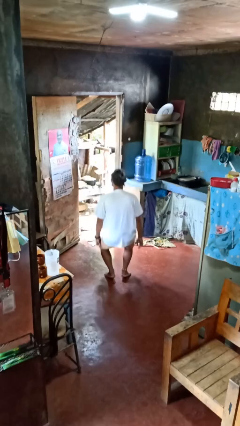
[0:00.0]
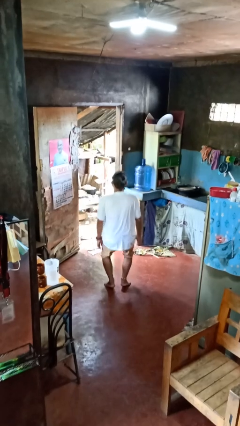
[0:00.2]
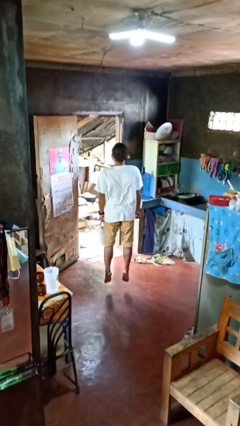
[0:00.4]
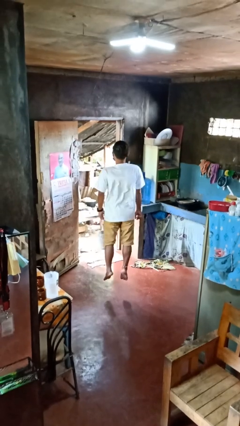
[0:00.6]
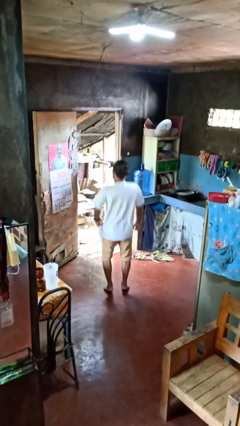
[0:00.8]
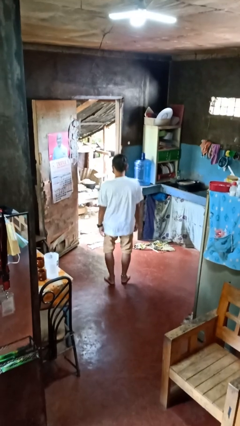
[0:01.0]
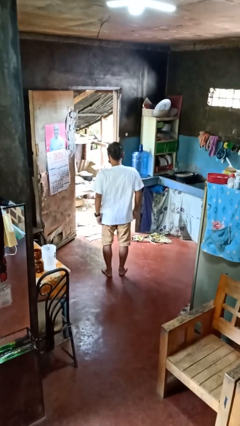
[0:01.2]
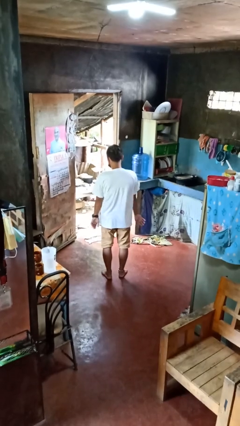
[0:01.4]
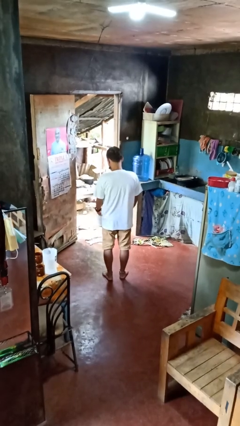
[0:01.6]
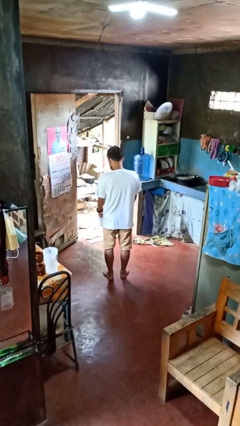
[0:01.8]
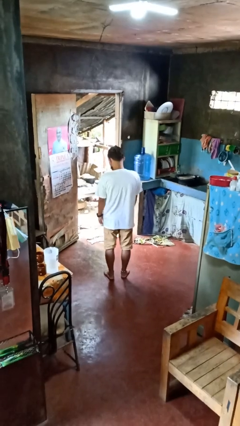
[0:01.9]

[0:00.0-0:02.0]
person jumps

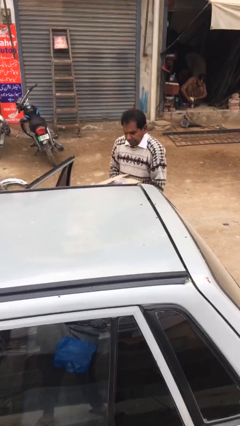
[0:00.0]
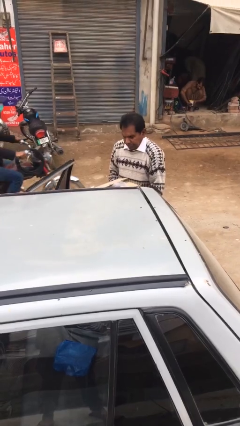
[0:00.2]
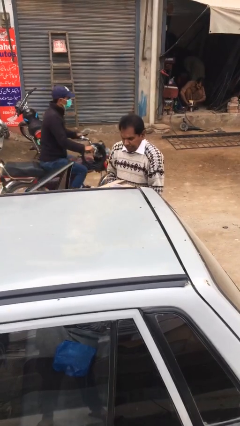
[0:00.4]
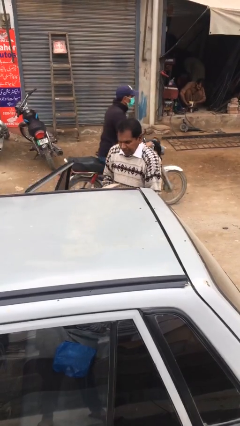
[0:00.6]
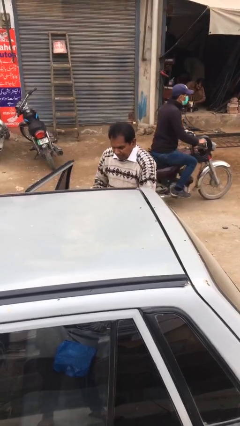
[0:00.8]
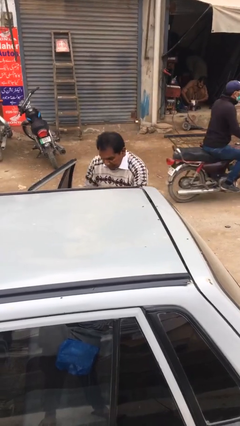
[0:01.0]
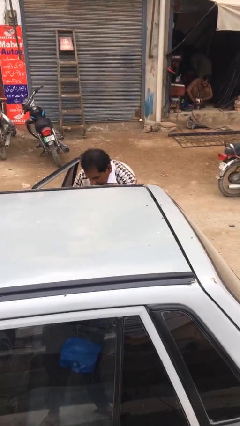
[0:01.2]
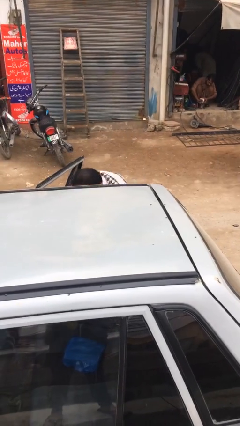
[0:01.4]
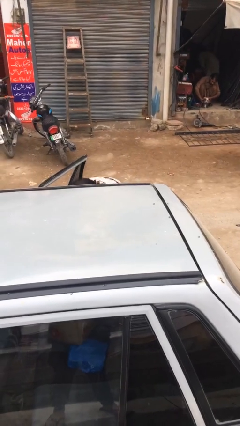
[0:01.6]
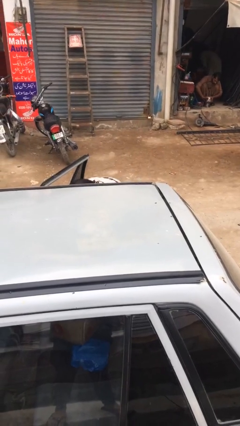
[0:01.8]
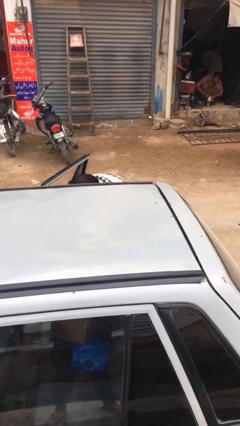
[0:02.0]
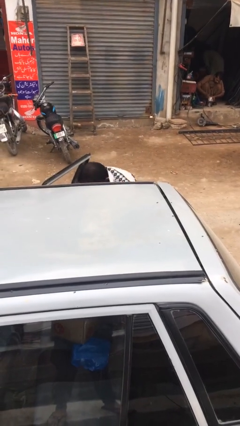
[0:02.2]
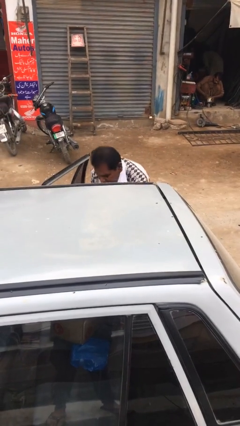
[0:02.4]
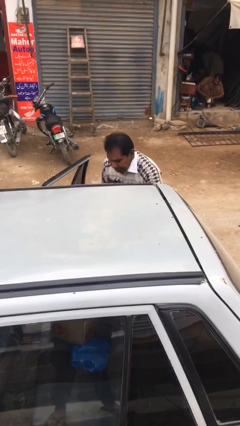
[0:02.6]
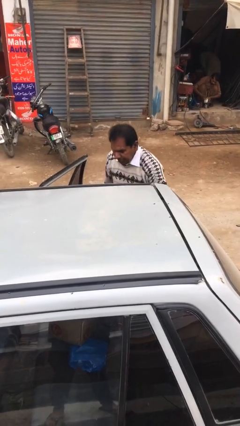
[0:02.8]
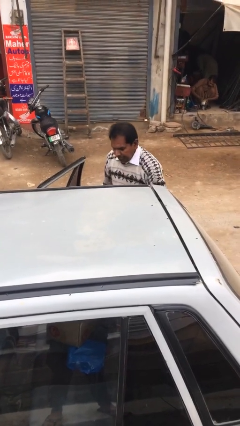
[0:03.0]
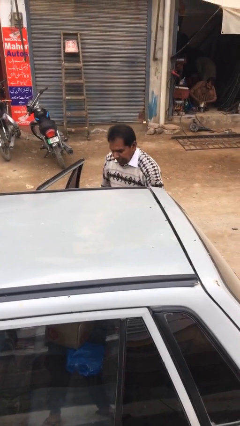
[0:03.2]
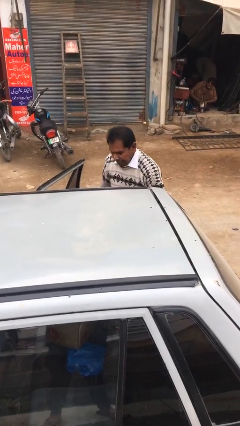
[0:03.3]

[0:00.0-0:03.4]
person loads car

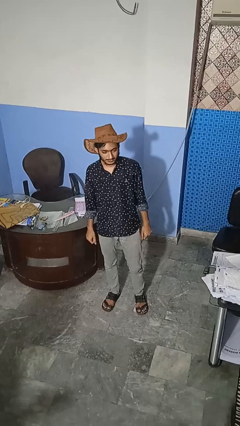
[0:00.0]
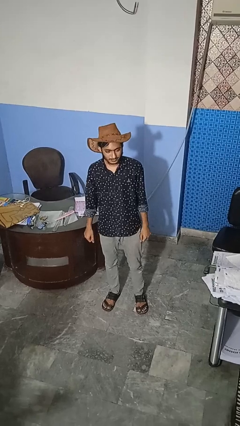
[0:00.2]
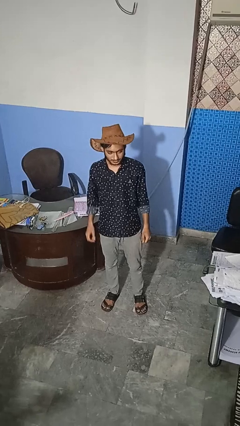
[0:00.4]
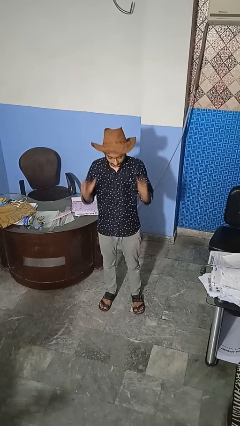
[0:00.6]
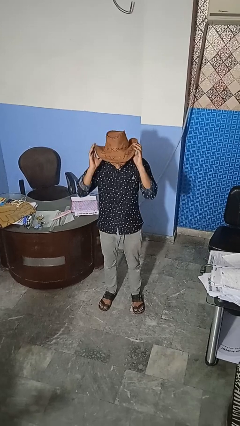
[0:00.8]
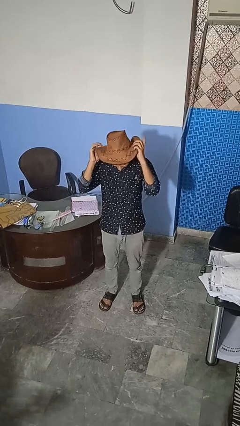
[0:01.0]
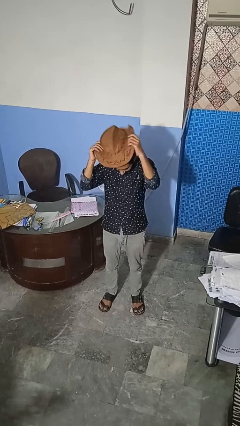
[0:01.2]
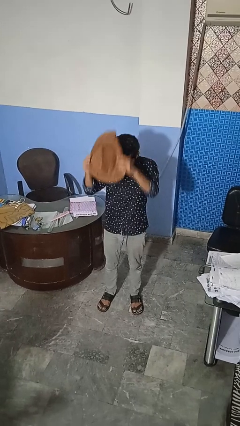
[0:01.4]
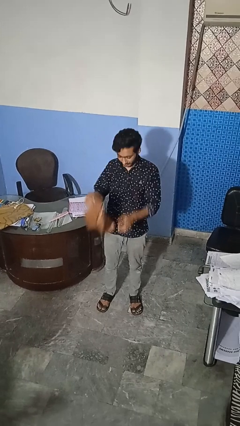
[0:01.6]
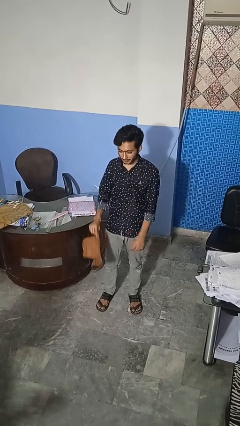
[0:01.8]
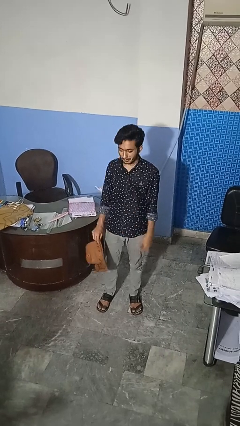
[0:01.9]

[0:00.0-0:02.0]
person takes off hat

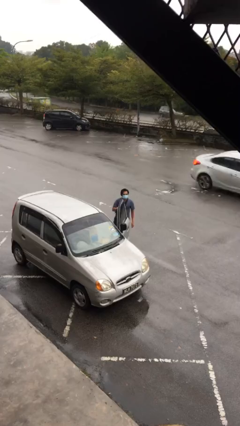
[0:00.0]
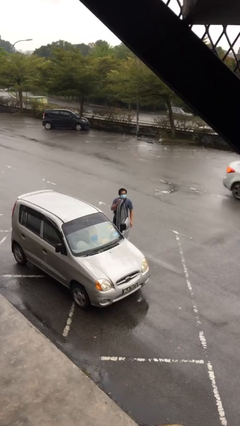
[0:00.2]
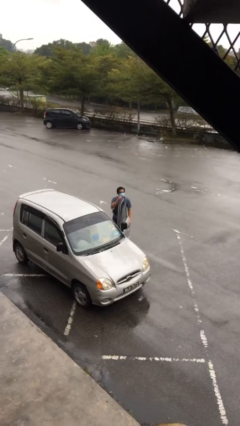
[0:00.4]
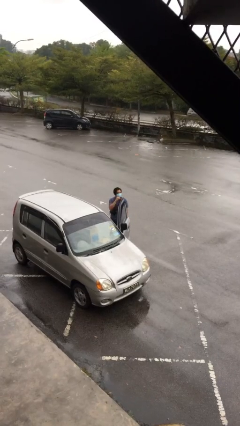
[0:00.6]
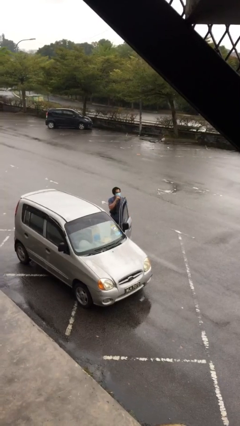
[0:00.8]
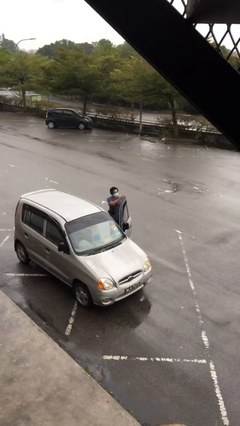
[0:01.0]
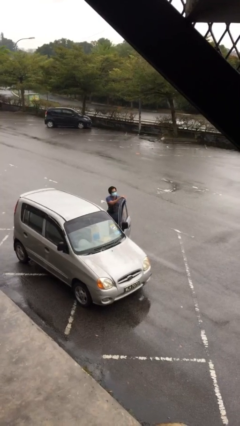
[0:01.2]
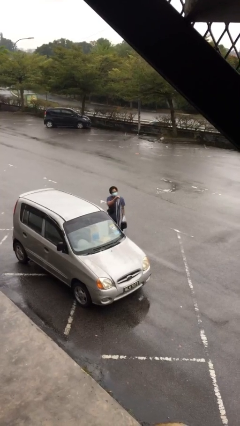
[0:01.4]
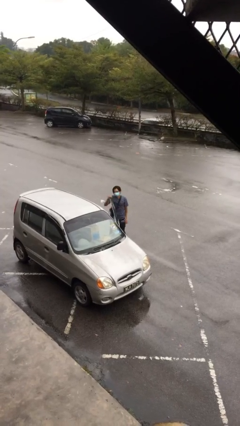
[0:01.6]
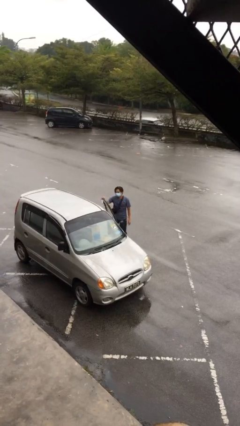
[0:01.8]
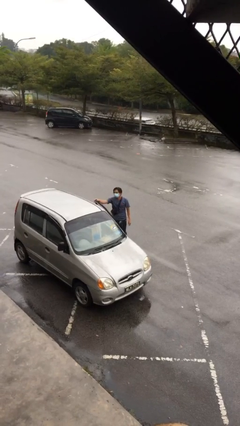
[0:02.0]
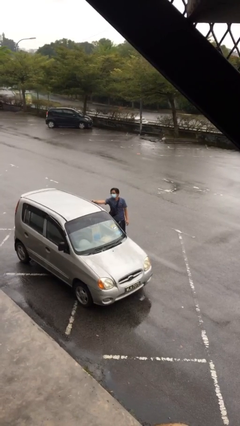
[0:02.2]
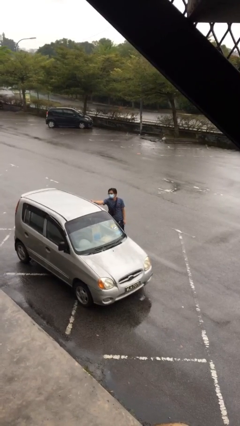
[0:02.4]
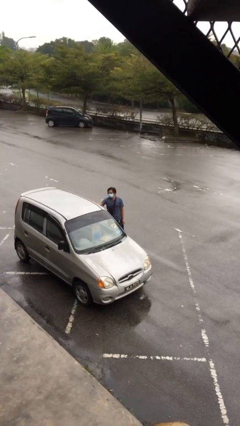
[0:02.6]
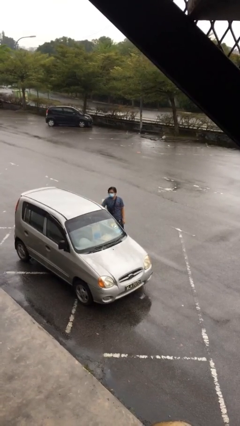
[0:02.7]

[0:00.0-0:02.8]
person closes car door

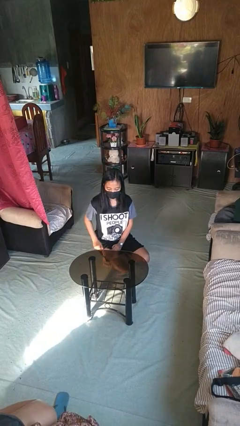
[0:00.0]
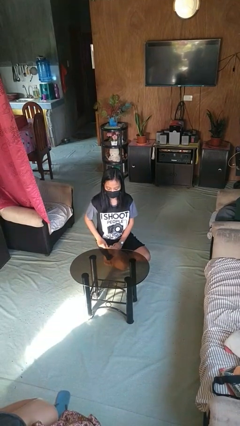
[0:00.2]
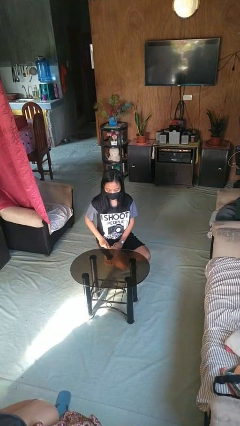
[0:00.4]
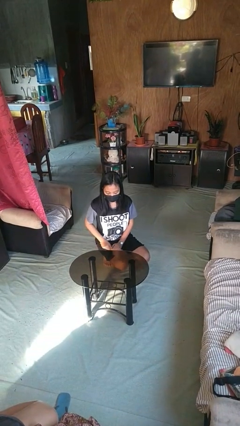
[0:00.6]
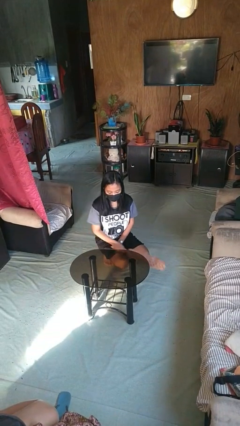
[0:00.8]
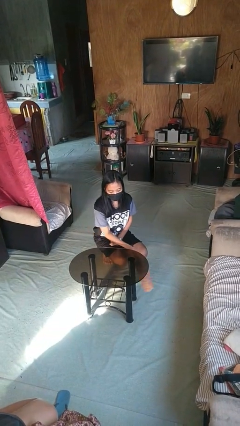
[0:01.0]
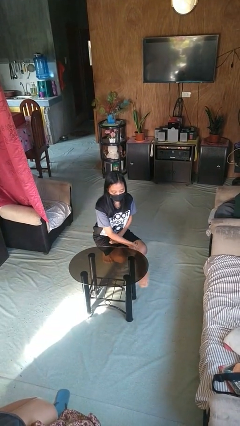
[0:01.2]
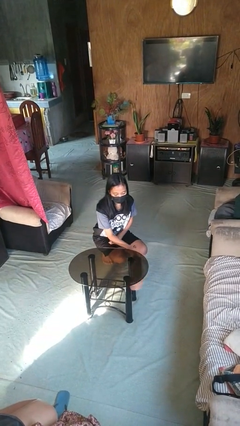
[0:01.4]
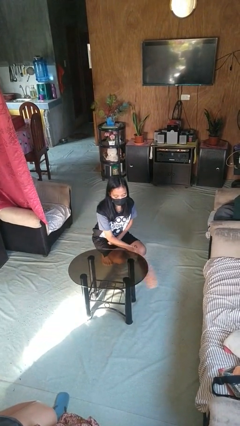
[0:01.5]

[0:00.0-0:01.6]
person dusts furniture

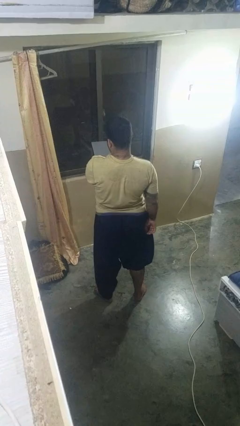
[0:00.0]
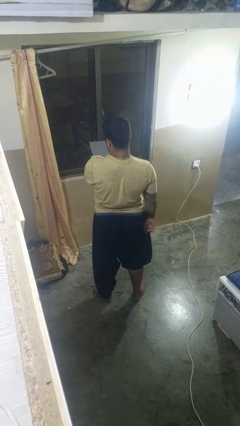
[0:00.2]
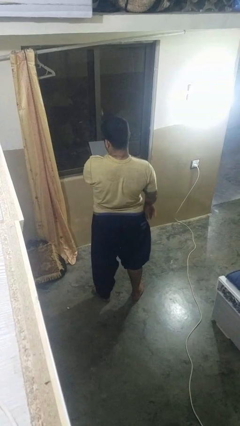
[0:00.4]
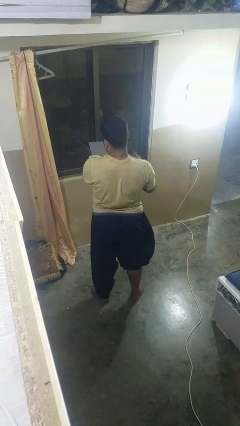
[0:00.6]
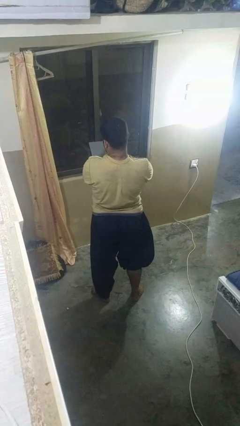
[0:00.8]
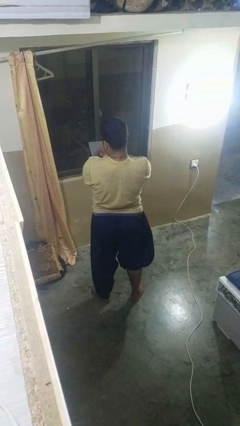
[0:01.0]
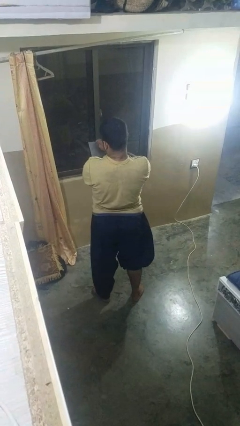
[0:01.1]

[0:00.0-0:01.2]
person interacts with tablet

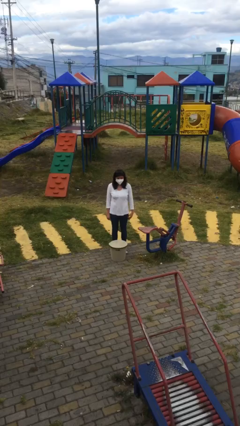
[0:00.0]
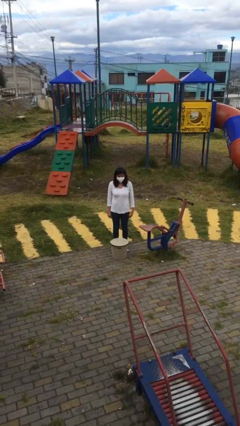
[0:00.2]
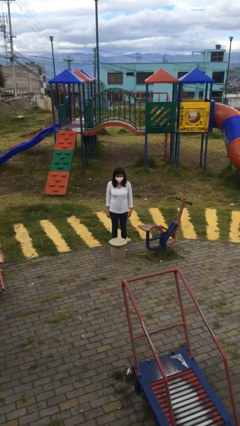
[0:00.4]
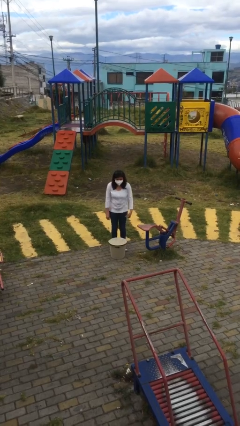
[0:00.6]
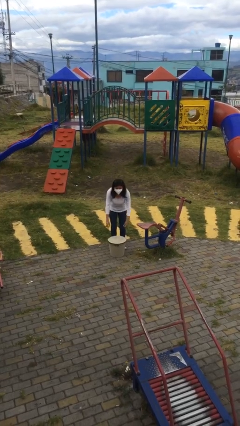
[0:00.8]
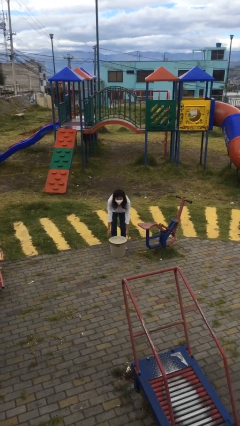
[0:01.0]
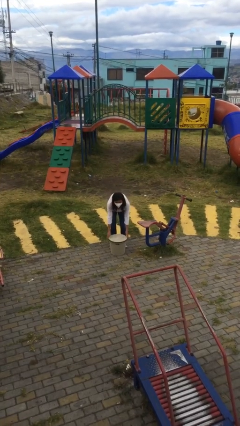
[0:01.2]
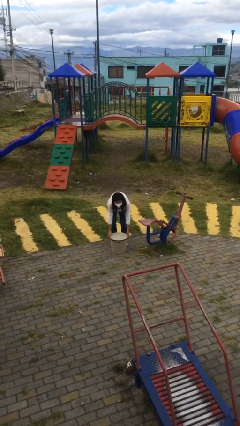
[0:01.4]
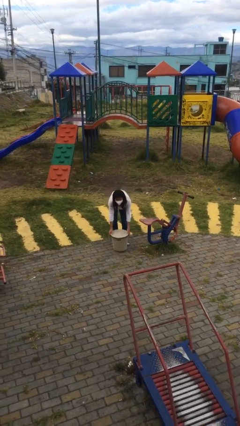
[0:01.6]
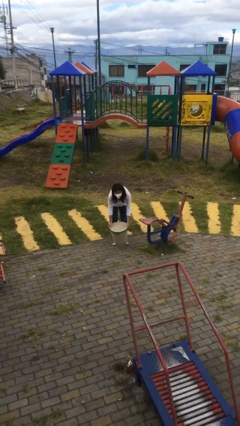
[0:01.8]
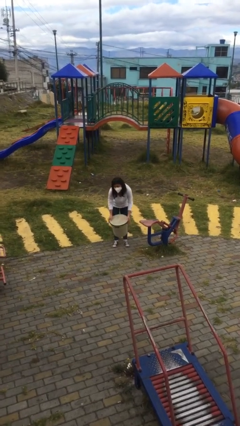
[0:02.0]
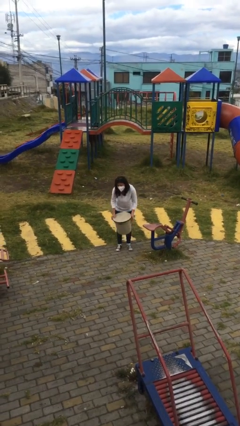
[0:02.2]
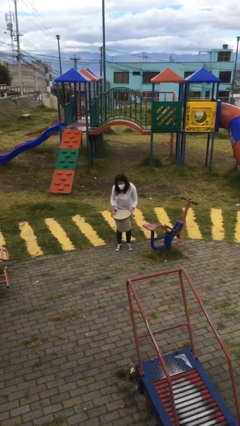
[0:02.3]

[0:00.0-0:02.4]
person picks up object from floor

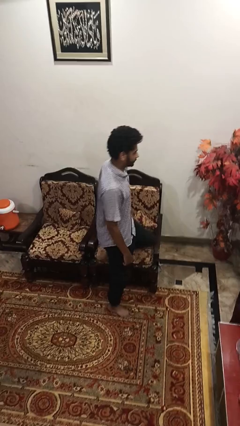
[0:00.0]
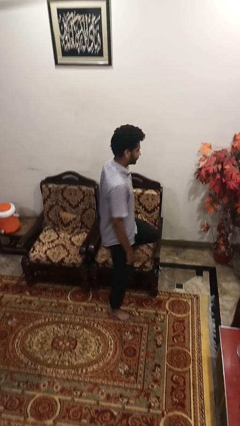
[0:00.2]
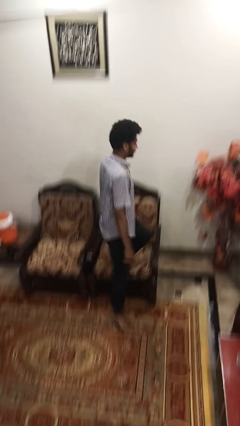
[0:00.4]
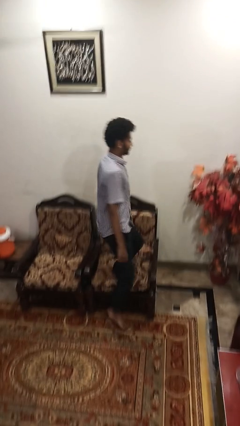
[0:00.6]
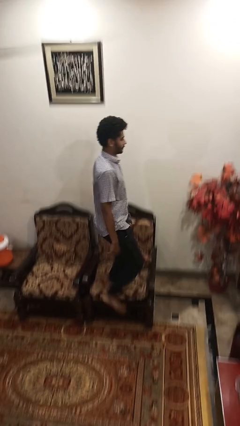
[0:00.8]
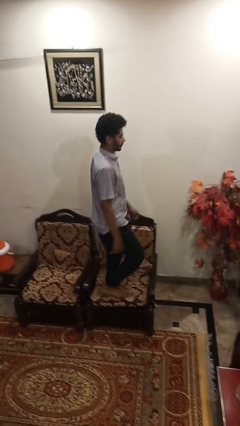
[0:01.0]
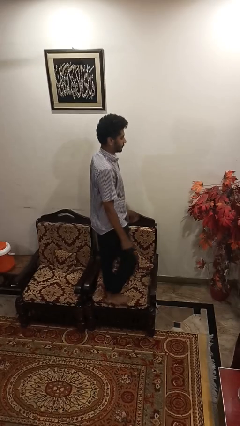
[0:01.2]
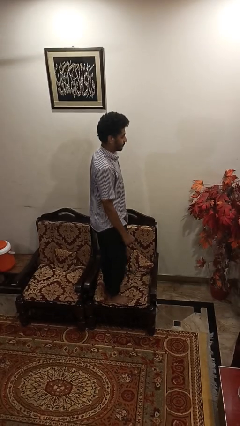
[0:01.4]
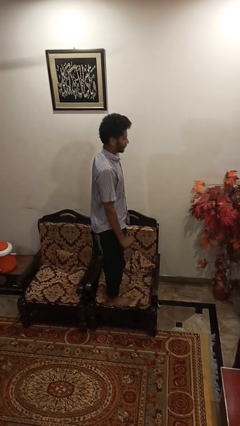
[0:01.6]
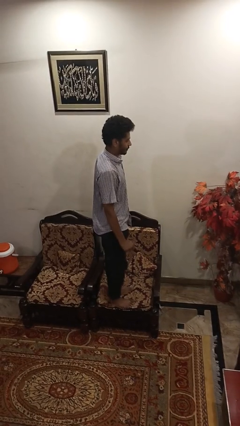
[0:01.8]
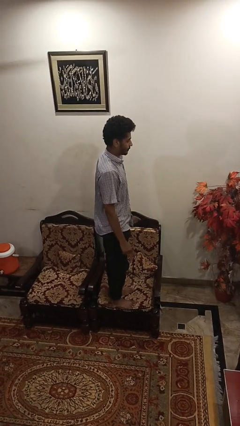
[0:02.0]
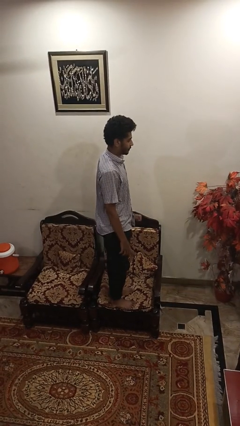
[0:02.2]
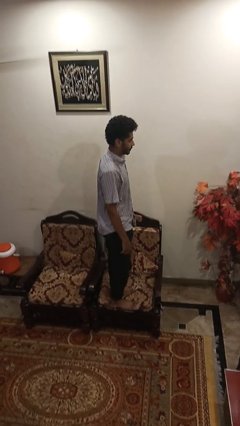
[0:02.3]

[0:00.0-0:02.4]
person climbs on couch
